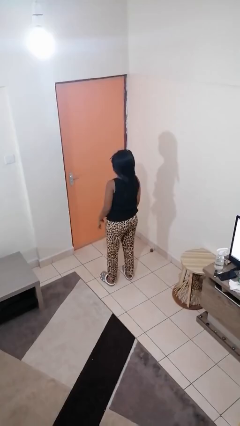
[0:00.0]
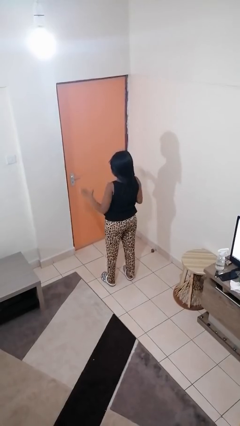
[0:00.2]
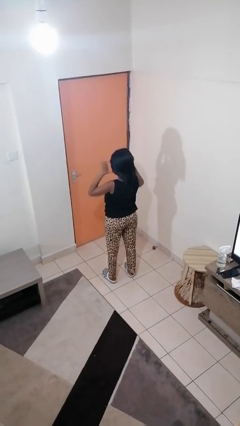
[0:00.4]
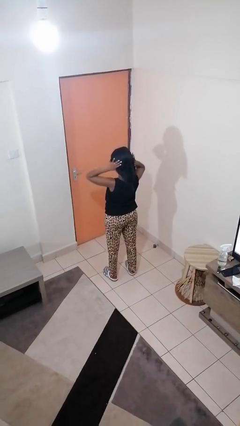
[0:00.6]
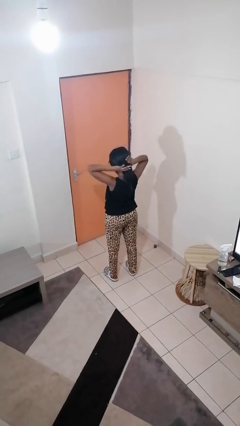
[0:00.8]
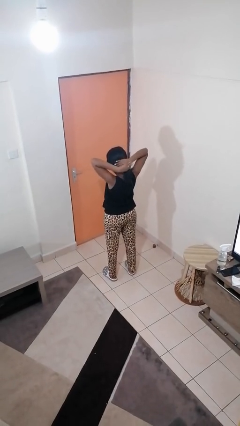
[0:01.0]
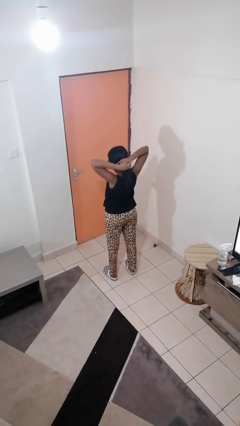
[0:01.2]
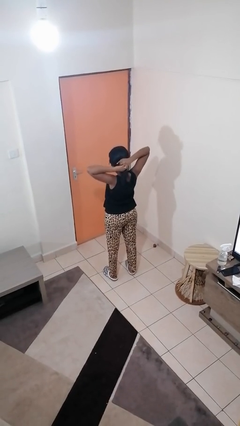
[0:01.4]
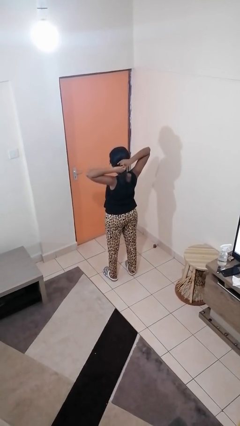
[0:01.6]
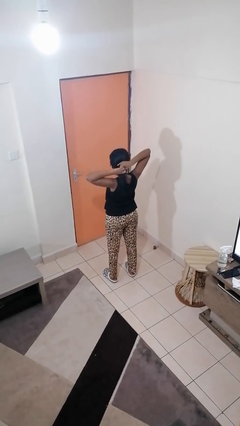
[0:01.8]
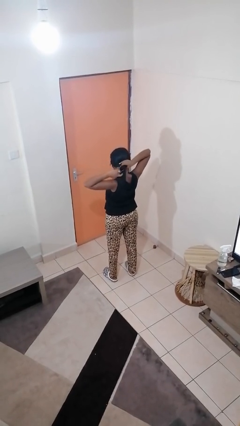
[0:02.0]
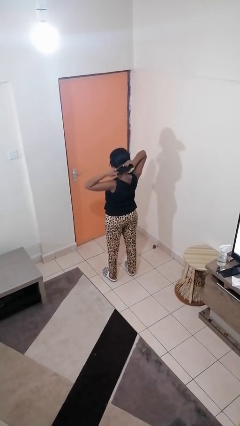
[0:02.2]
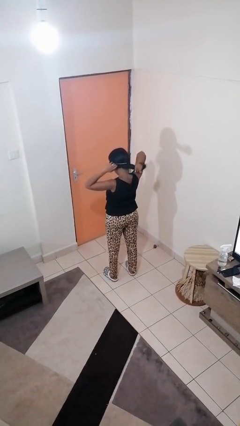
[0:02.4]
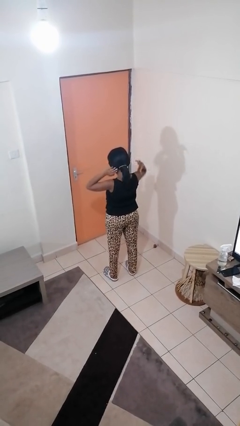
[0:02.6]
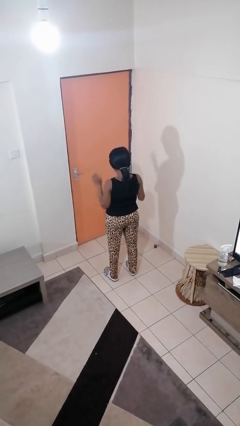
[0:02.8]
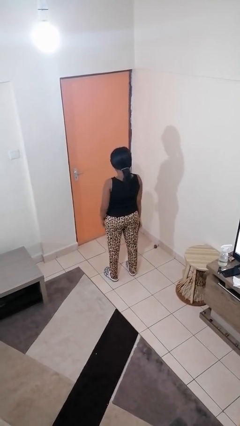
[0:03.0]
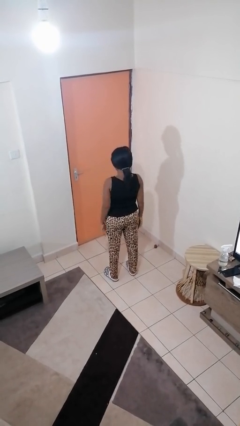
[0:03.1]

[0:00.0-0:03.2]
person puts hair in ponytail

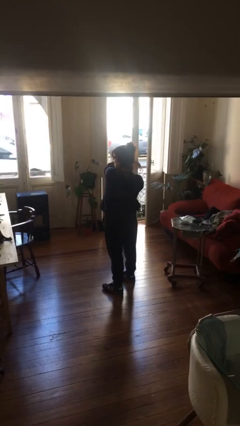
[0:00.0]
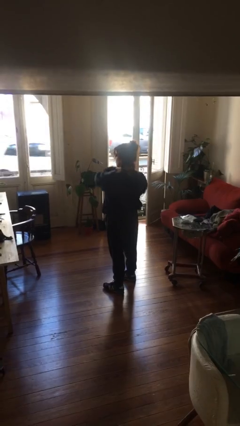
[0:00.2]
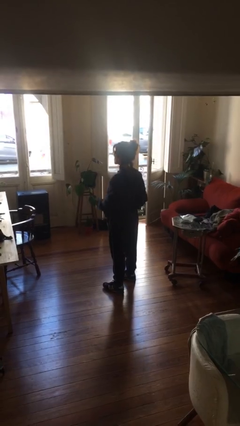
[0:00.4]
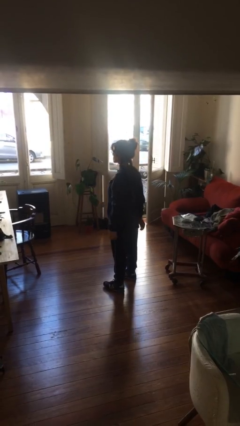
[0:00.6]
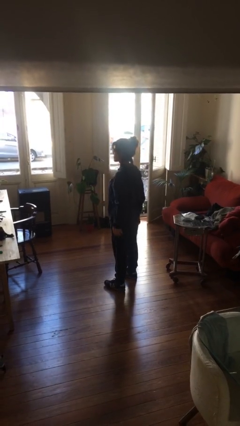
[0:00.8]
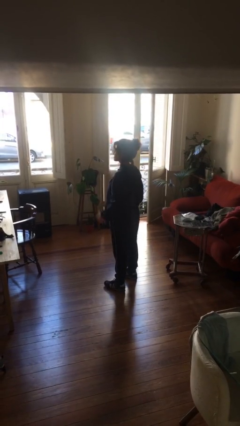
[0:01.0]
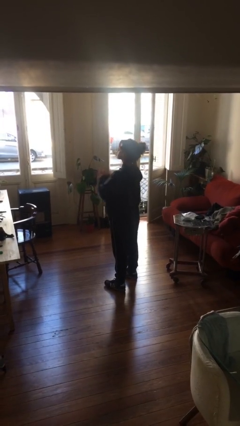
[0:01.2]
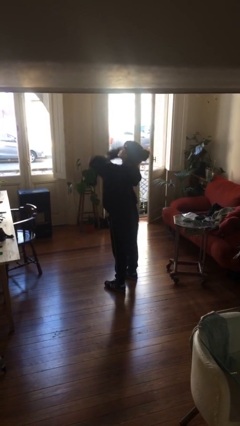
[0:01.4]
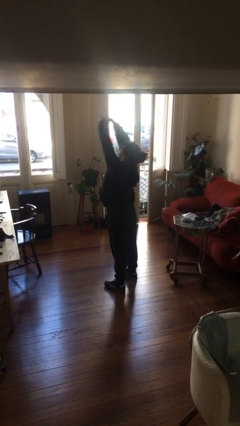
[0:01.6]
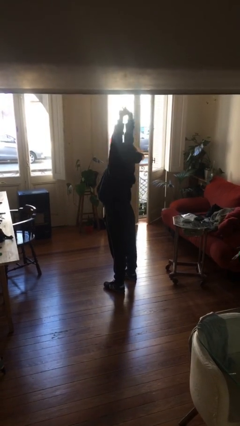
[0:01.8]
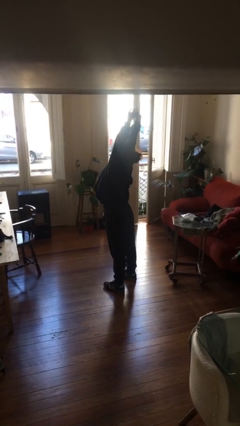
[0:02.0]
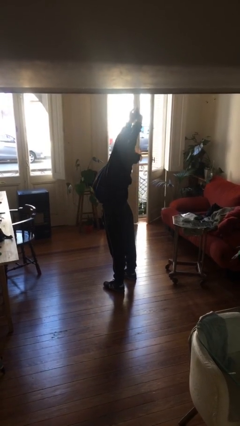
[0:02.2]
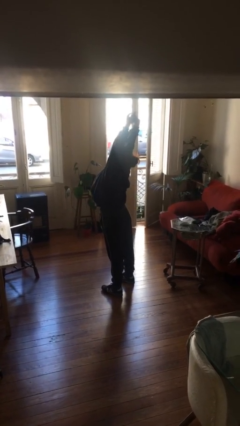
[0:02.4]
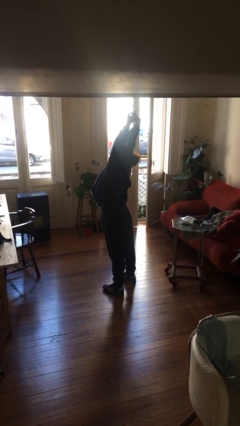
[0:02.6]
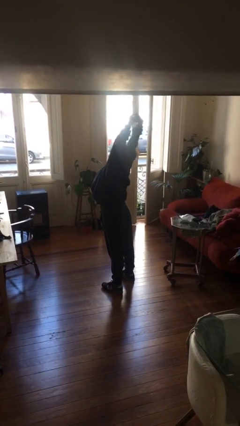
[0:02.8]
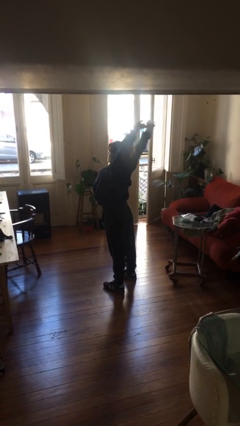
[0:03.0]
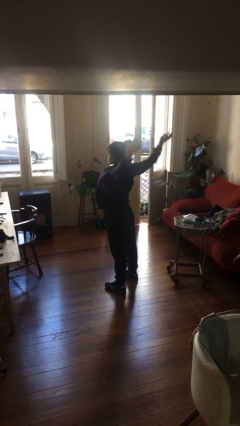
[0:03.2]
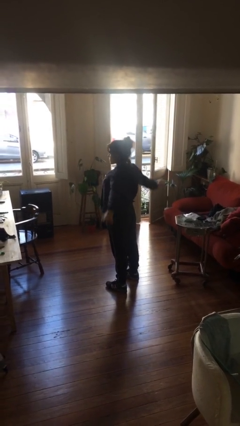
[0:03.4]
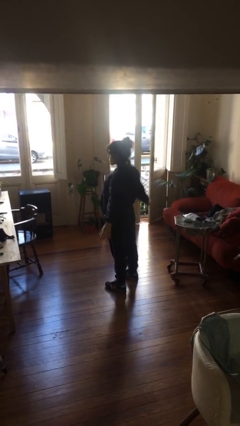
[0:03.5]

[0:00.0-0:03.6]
person stretches arms over head

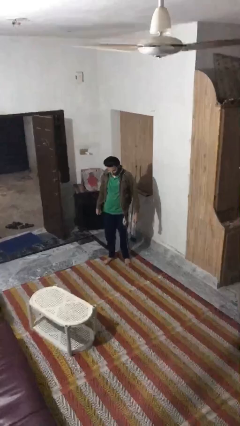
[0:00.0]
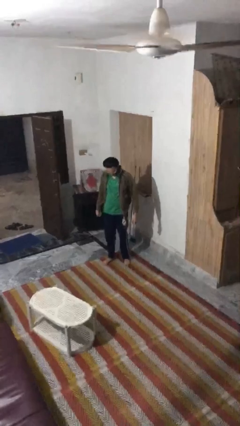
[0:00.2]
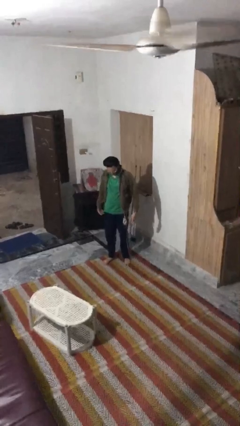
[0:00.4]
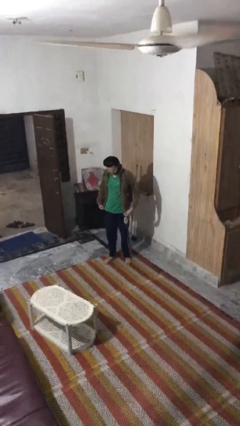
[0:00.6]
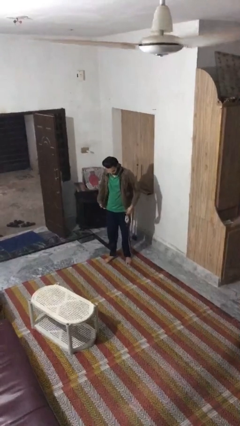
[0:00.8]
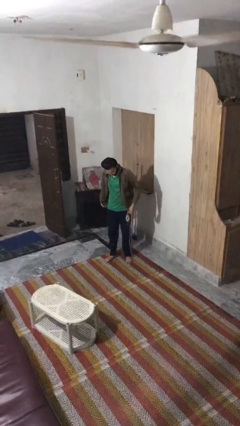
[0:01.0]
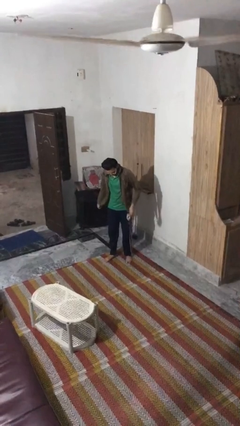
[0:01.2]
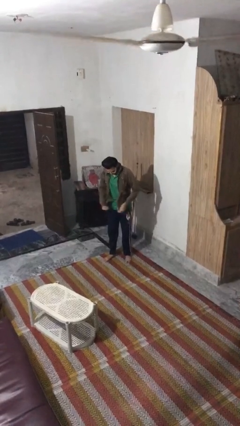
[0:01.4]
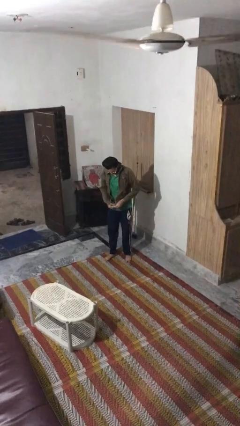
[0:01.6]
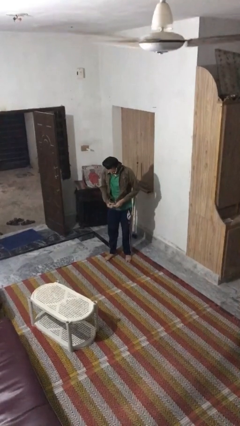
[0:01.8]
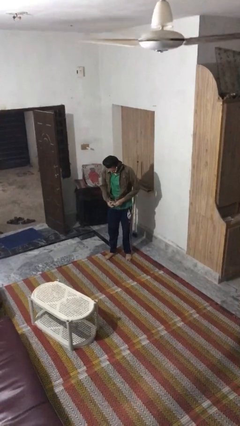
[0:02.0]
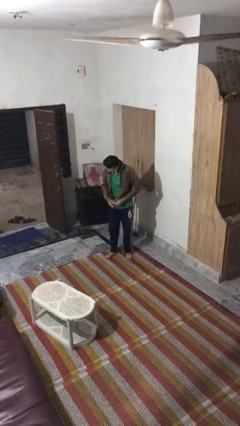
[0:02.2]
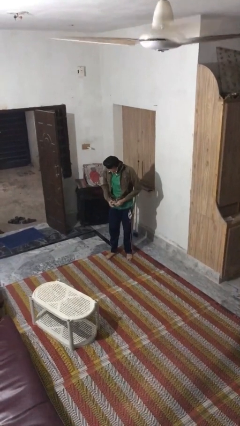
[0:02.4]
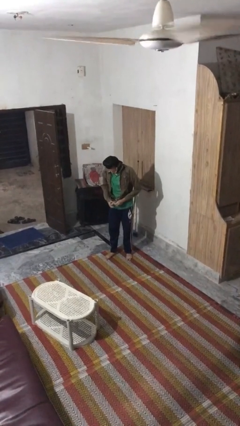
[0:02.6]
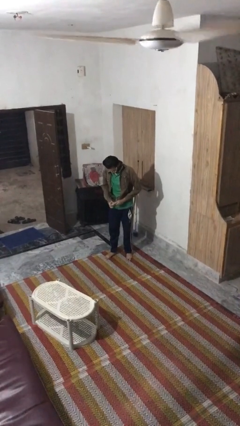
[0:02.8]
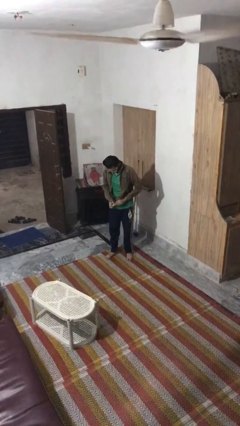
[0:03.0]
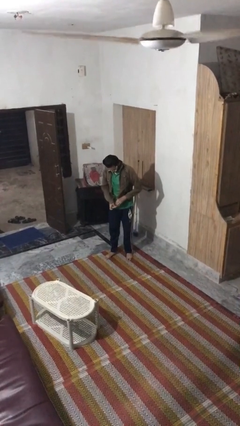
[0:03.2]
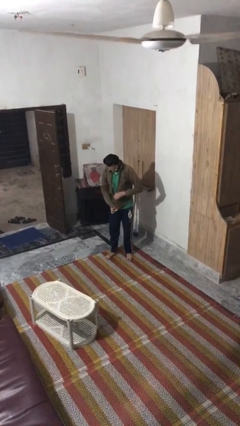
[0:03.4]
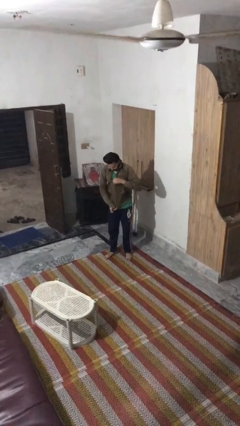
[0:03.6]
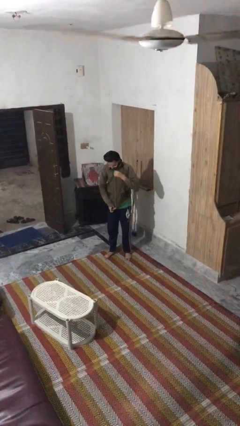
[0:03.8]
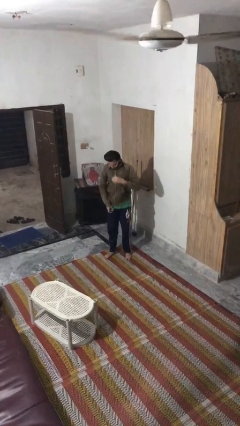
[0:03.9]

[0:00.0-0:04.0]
person zips up jacket

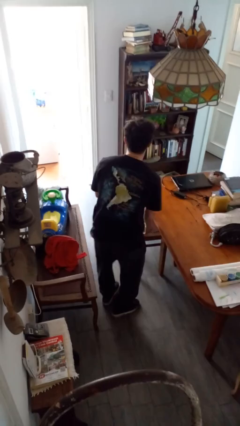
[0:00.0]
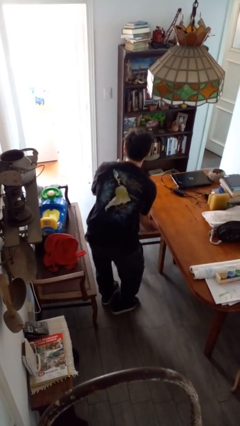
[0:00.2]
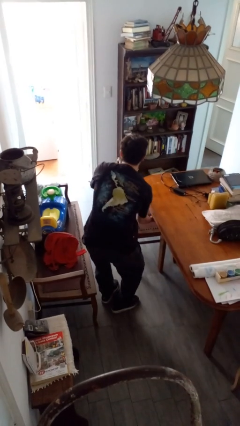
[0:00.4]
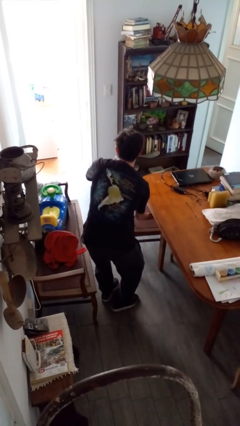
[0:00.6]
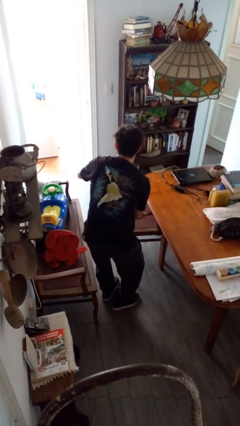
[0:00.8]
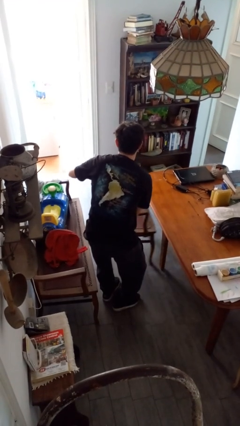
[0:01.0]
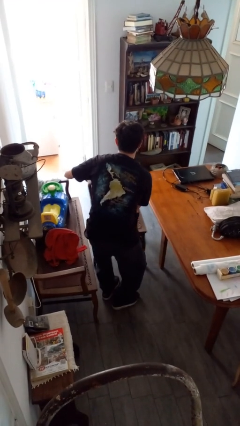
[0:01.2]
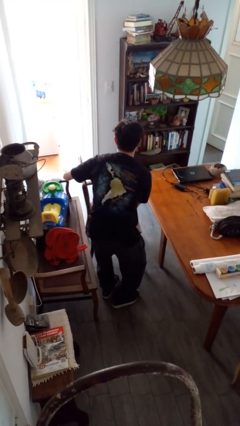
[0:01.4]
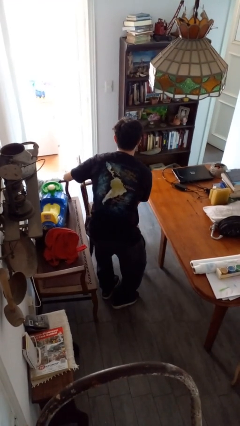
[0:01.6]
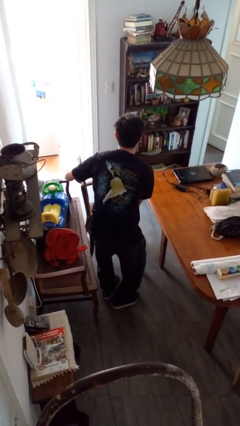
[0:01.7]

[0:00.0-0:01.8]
person pulls out chair

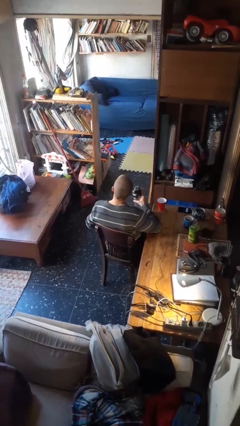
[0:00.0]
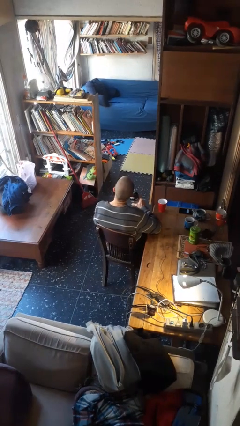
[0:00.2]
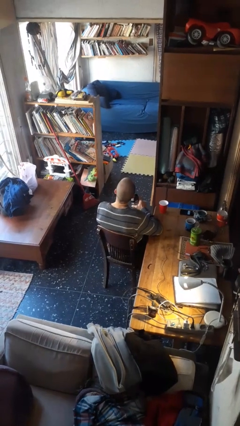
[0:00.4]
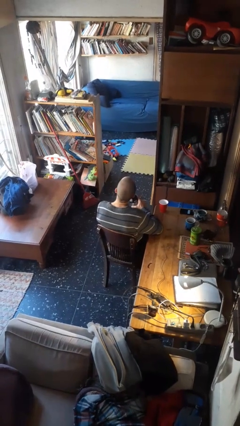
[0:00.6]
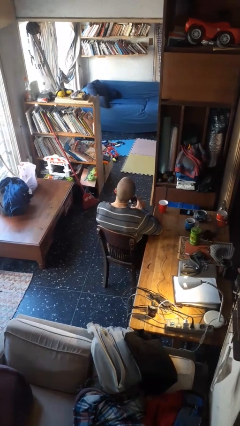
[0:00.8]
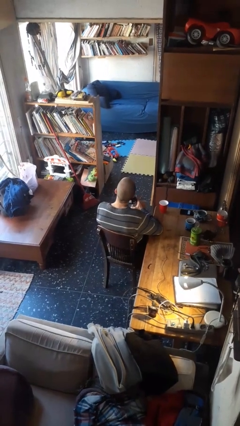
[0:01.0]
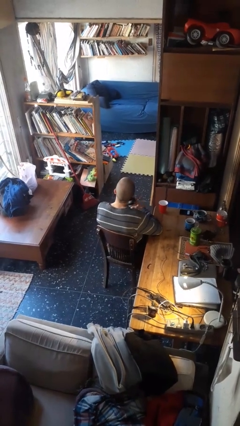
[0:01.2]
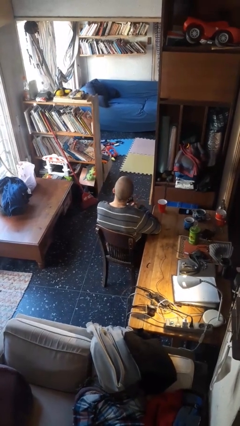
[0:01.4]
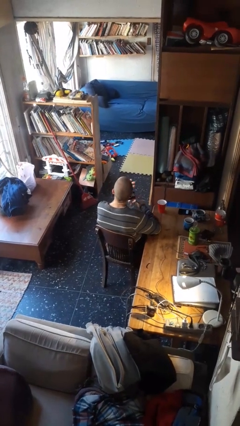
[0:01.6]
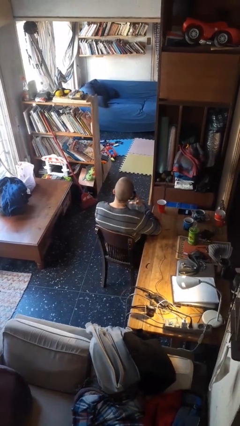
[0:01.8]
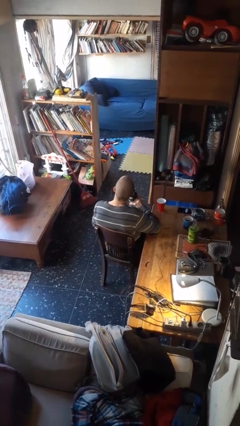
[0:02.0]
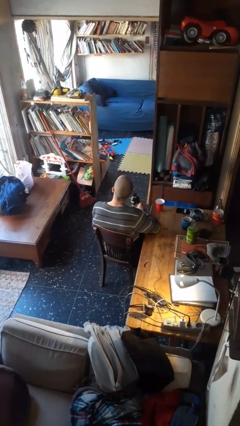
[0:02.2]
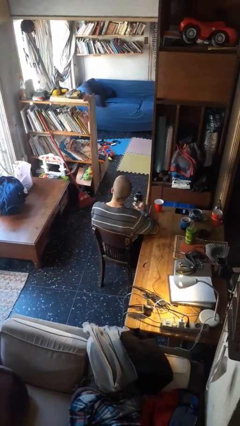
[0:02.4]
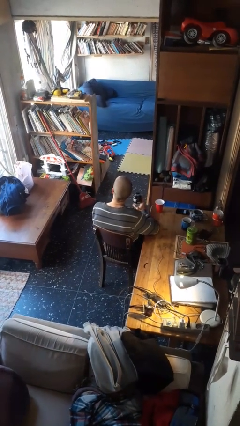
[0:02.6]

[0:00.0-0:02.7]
person screws lid to bottle

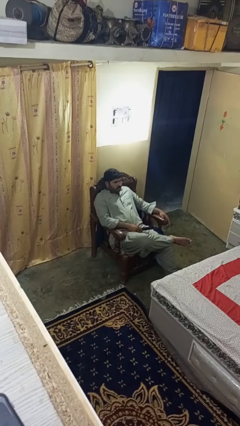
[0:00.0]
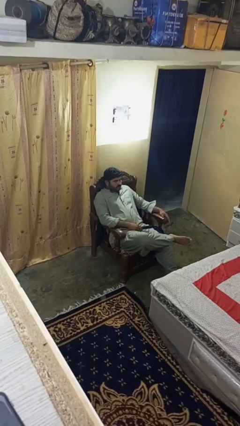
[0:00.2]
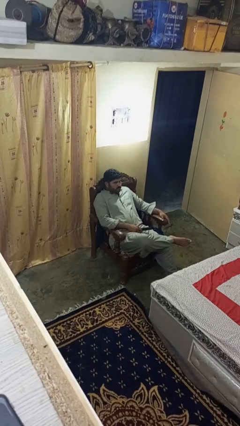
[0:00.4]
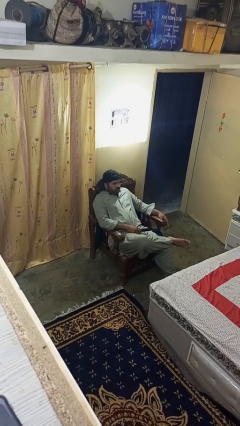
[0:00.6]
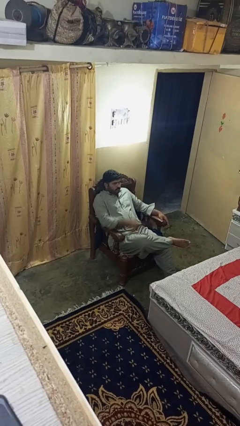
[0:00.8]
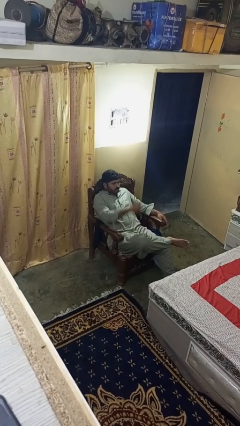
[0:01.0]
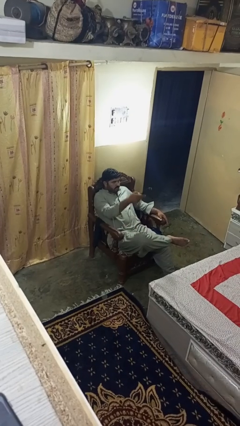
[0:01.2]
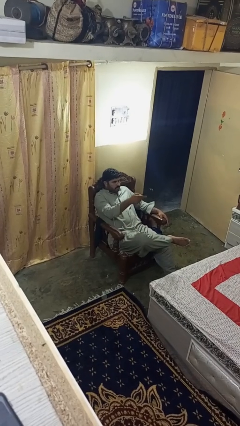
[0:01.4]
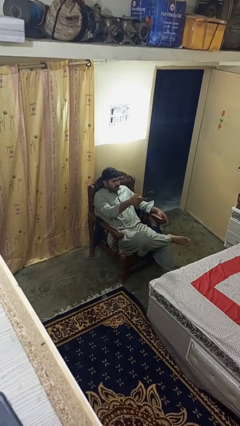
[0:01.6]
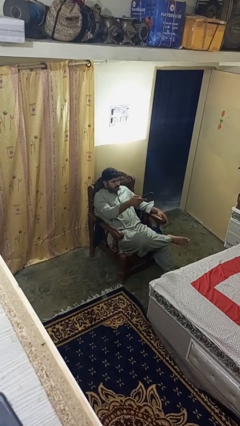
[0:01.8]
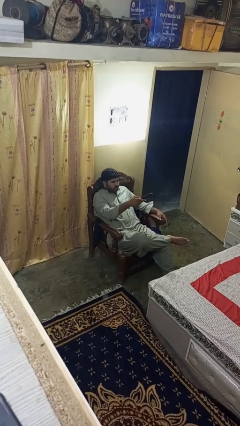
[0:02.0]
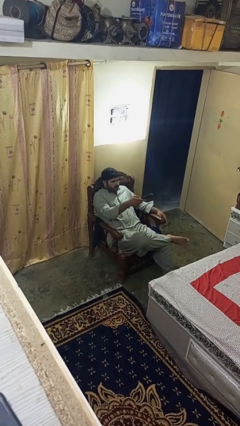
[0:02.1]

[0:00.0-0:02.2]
person uses television remote
